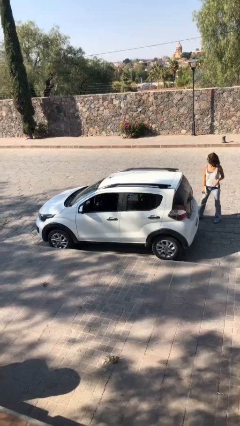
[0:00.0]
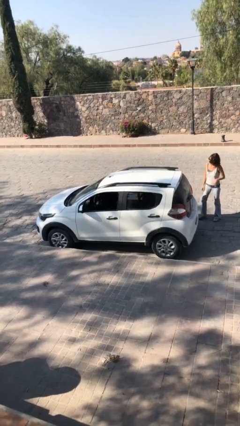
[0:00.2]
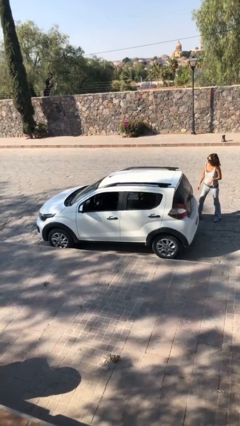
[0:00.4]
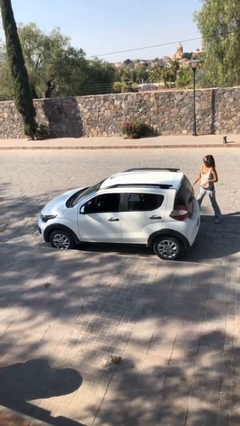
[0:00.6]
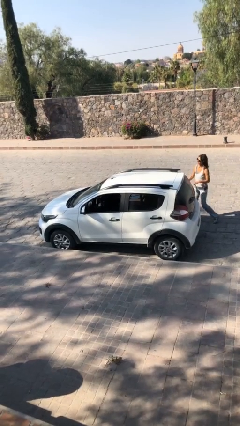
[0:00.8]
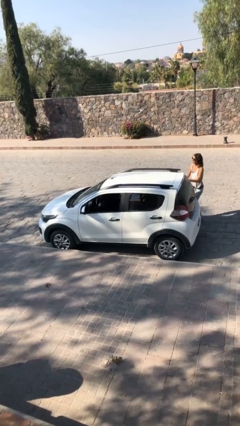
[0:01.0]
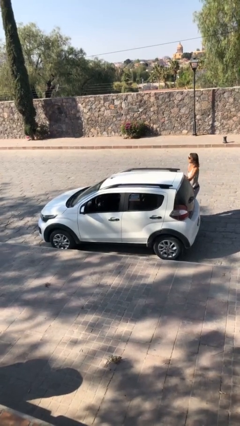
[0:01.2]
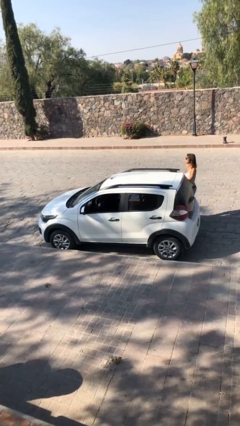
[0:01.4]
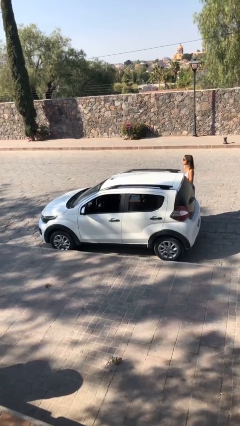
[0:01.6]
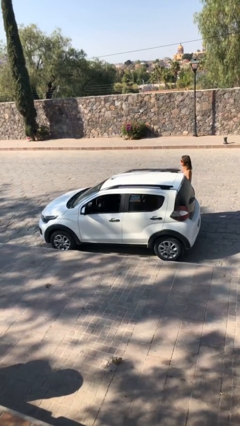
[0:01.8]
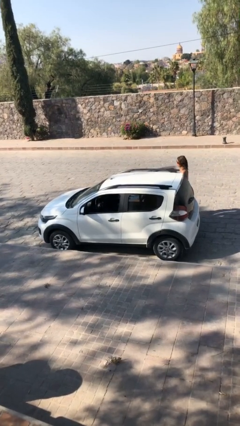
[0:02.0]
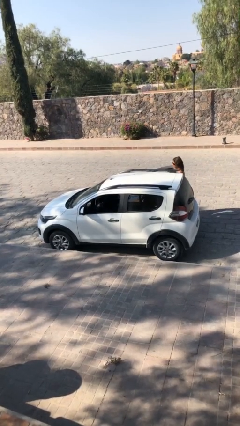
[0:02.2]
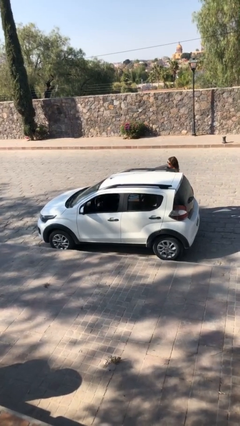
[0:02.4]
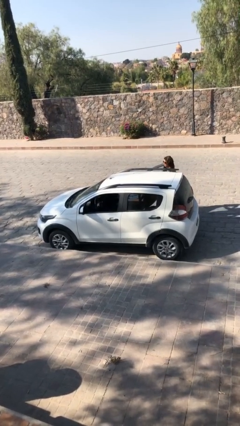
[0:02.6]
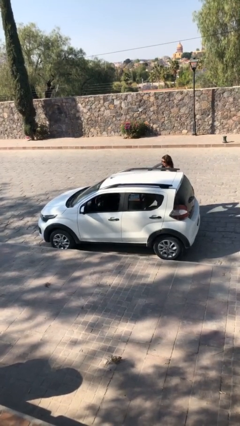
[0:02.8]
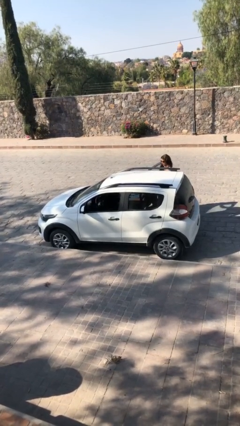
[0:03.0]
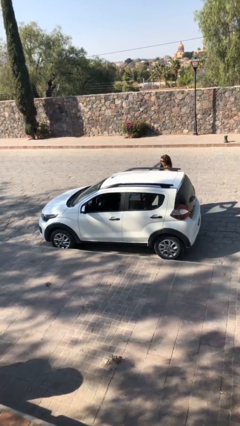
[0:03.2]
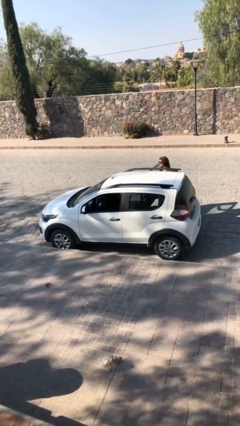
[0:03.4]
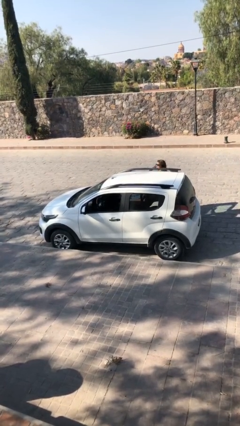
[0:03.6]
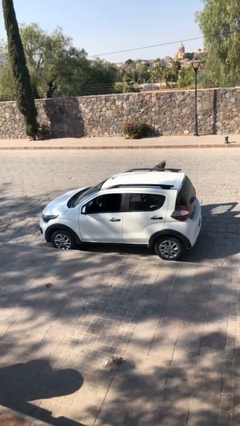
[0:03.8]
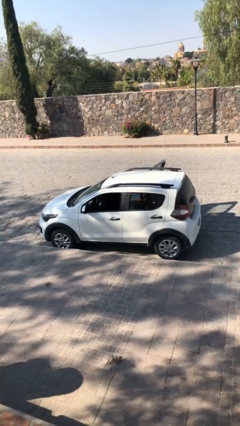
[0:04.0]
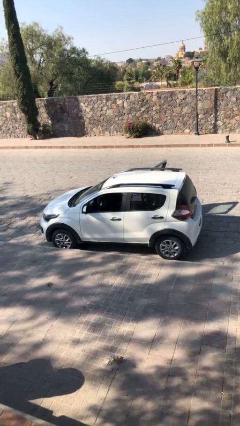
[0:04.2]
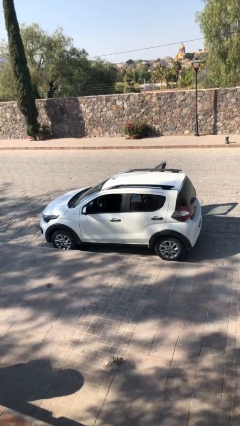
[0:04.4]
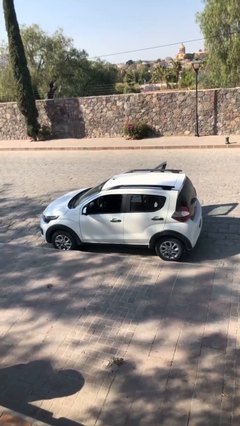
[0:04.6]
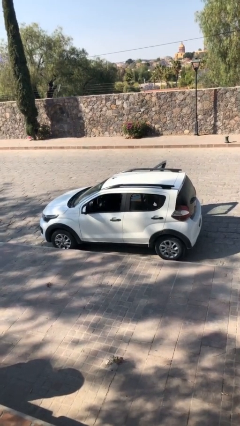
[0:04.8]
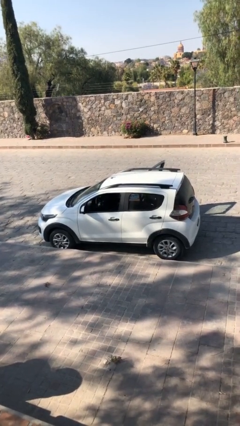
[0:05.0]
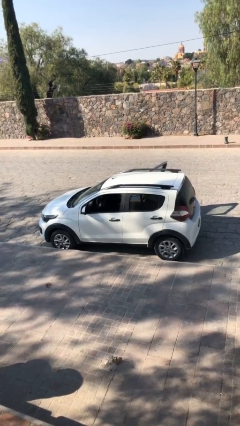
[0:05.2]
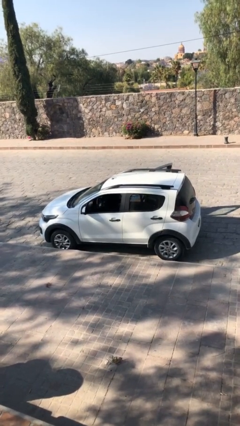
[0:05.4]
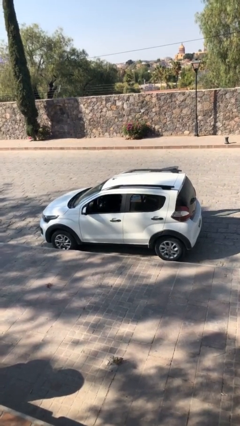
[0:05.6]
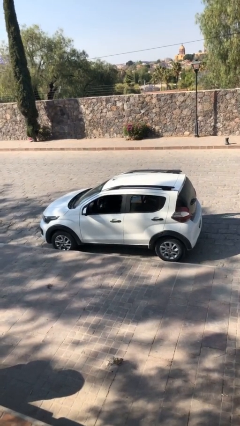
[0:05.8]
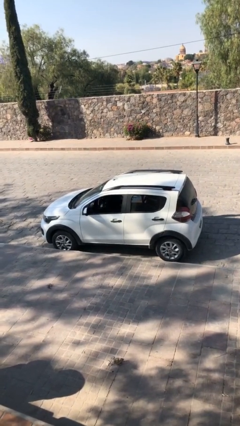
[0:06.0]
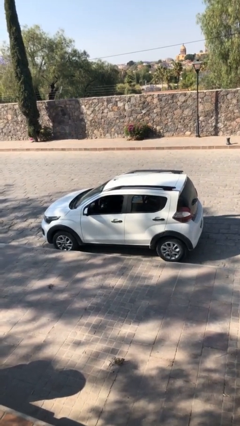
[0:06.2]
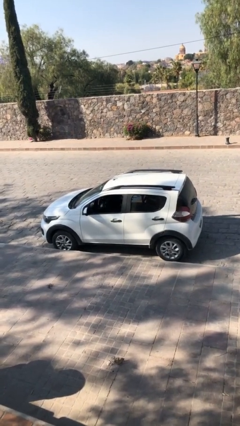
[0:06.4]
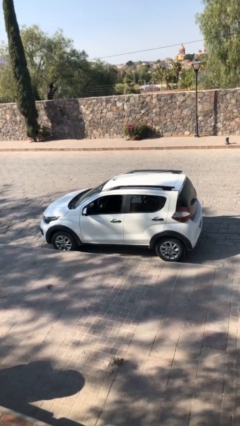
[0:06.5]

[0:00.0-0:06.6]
car picks up person

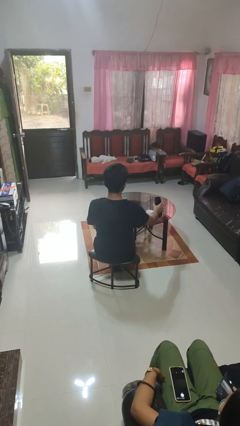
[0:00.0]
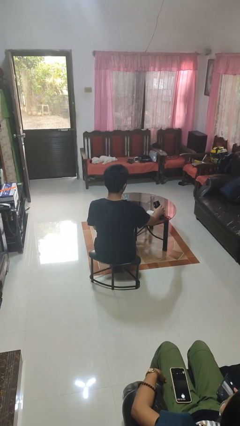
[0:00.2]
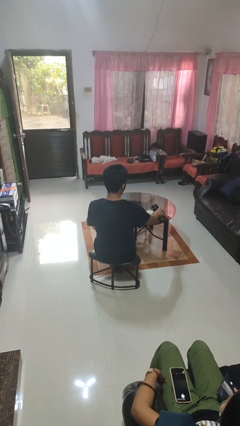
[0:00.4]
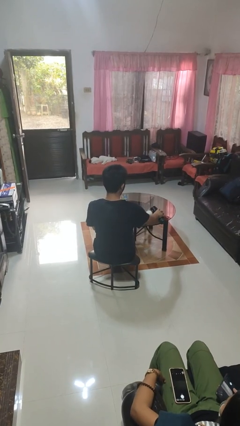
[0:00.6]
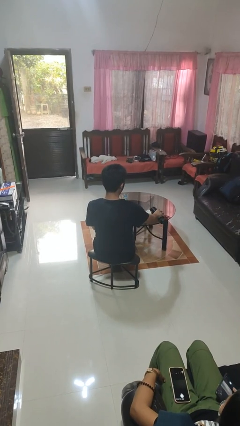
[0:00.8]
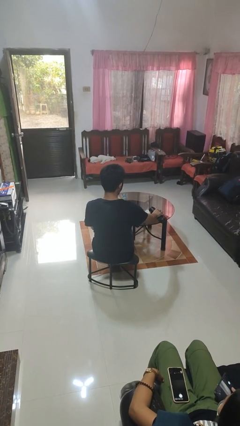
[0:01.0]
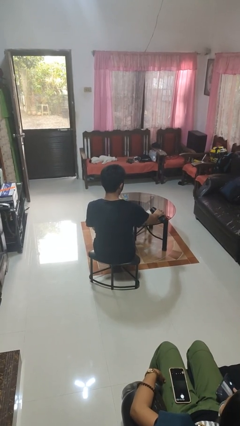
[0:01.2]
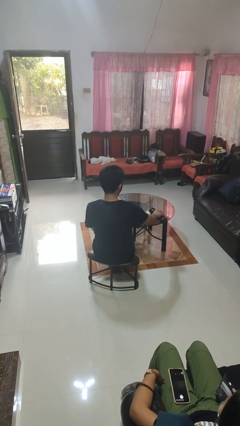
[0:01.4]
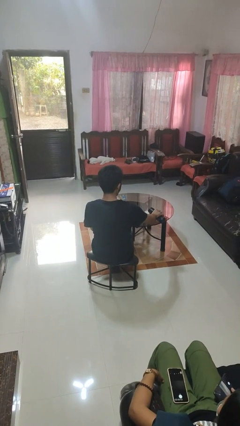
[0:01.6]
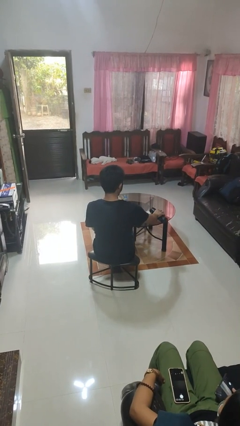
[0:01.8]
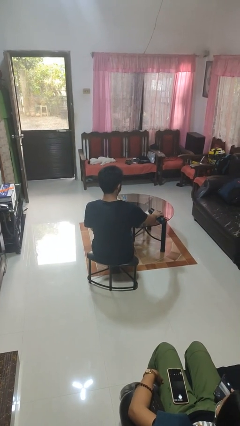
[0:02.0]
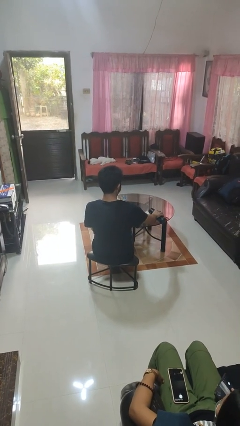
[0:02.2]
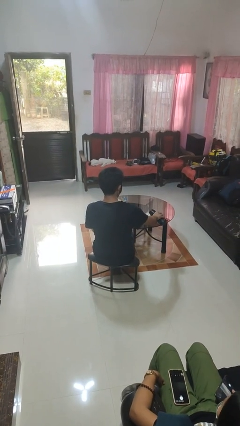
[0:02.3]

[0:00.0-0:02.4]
person pours liquid into cup

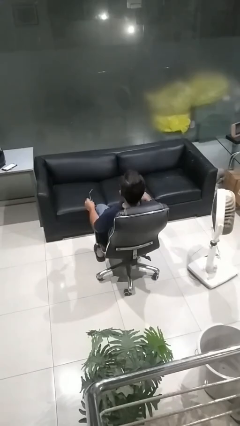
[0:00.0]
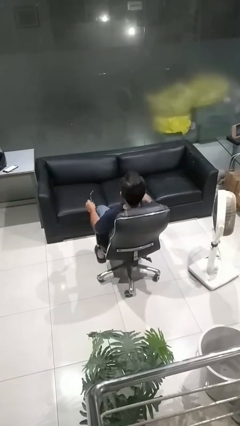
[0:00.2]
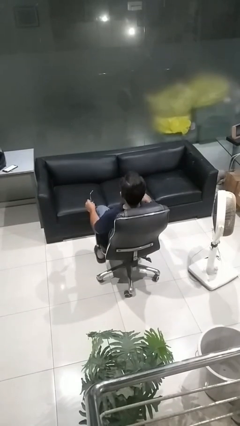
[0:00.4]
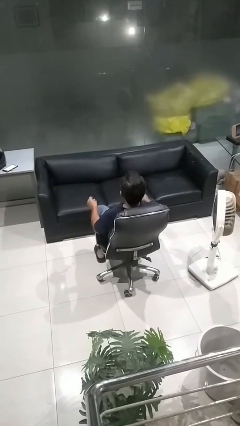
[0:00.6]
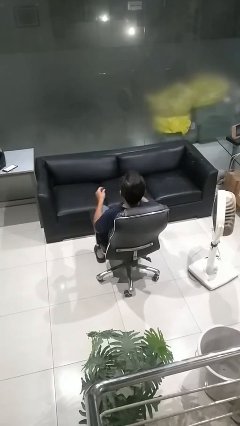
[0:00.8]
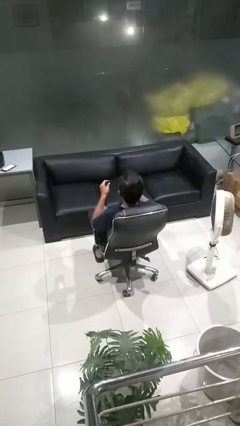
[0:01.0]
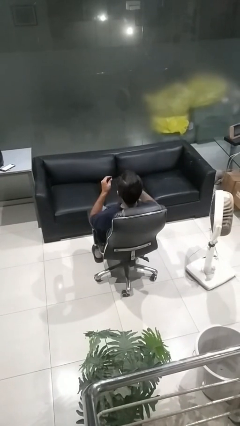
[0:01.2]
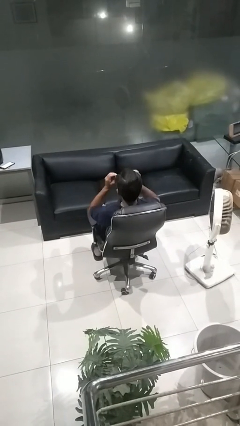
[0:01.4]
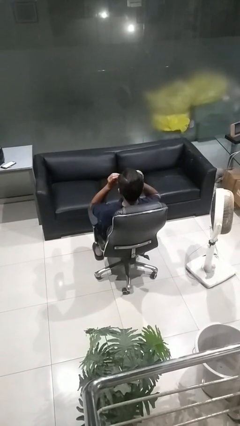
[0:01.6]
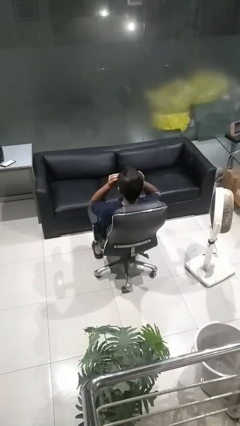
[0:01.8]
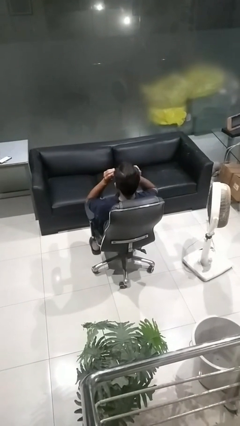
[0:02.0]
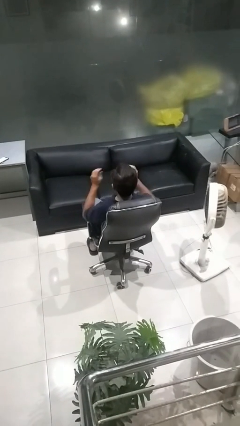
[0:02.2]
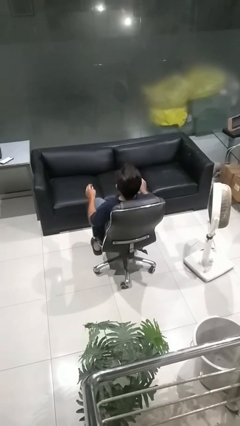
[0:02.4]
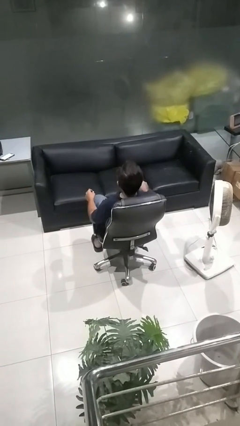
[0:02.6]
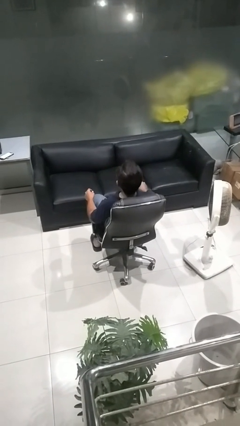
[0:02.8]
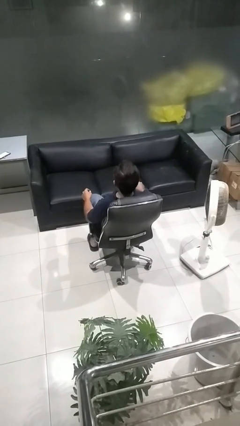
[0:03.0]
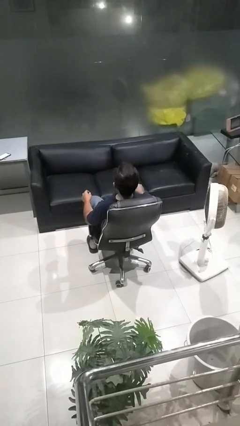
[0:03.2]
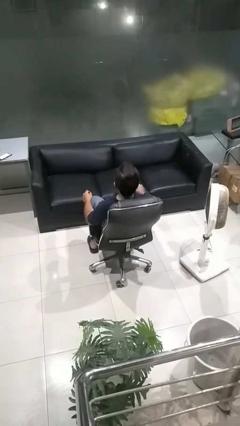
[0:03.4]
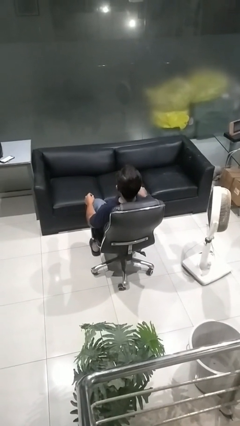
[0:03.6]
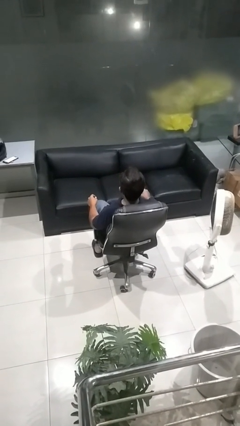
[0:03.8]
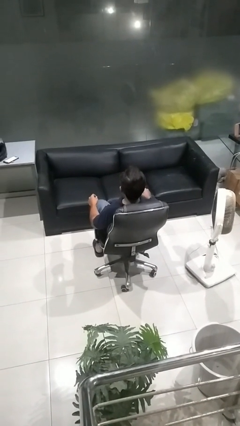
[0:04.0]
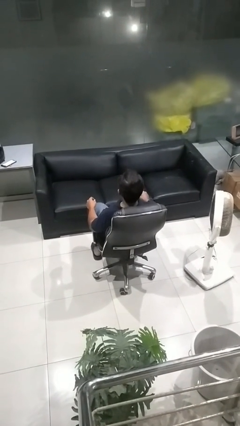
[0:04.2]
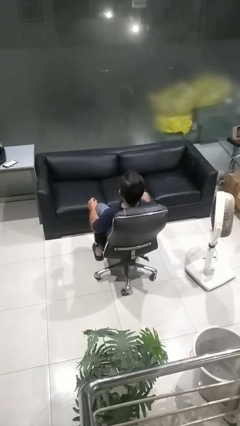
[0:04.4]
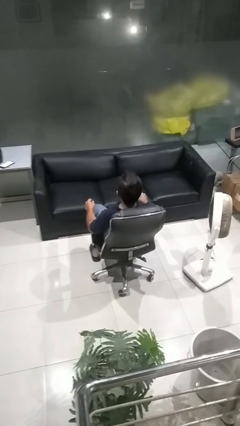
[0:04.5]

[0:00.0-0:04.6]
person puts on sunglasses

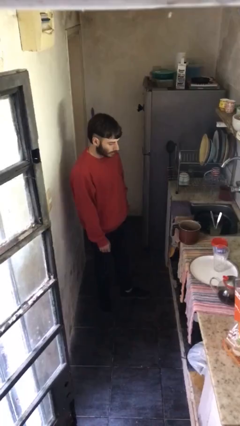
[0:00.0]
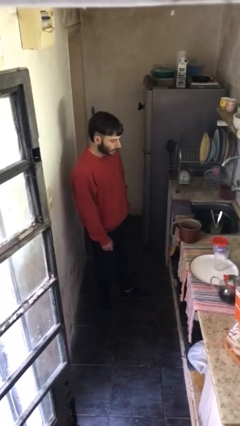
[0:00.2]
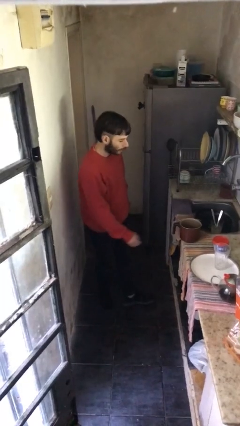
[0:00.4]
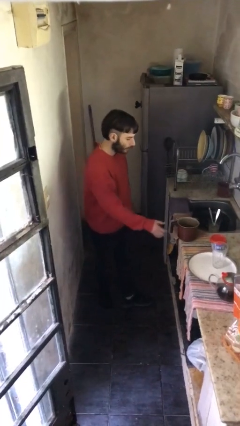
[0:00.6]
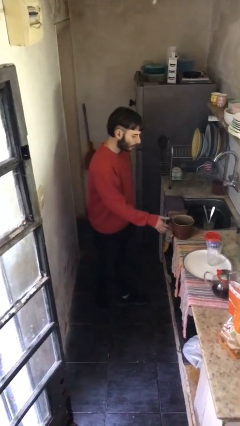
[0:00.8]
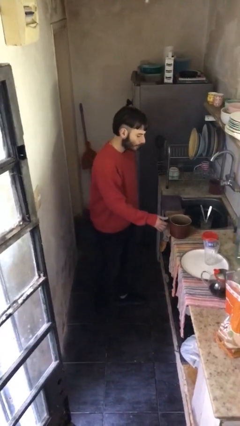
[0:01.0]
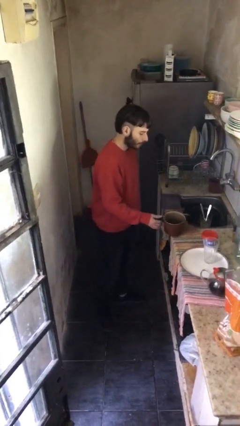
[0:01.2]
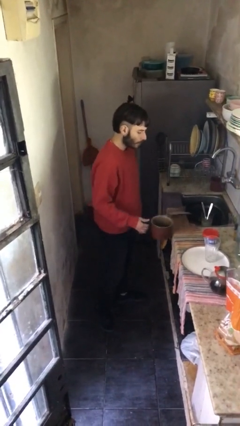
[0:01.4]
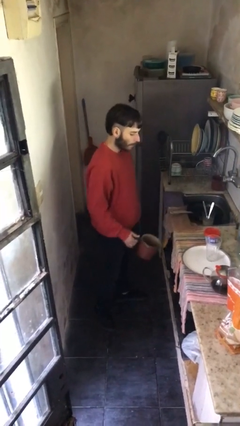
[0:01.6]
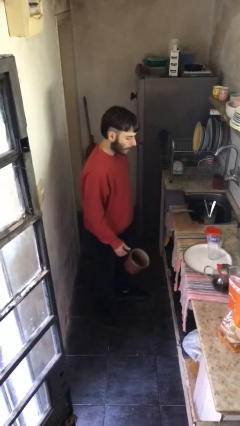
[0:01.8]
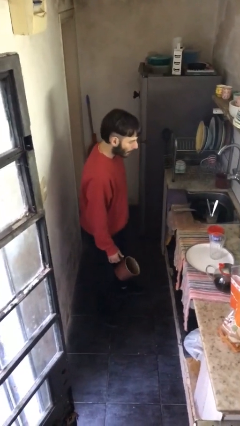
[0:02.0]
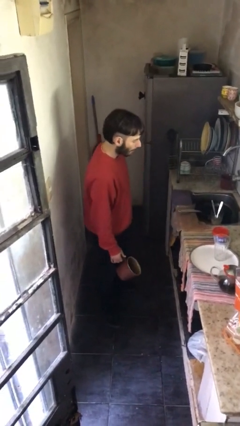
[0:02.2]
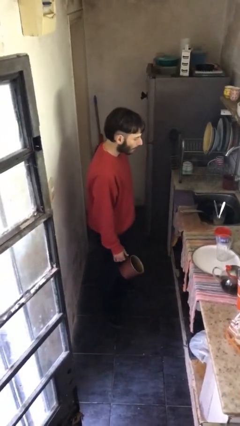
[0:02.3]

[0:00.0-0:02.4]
person picks up object from countertop

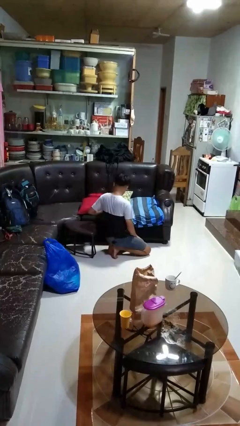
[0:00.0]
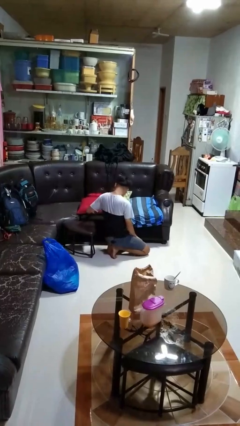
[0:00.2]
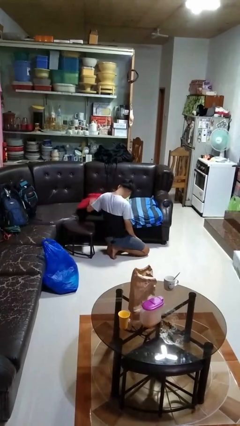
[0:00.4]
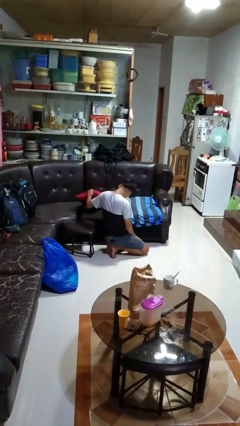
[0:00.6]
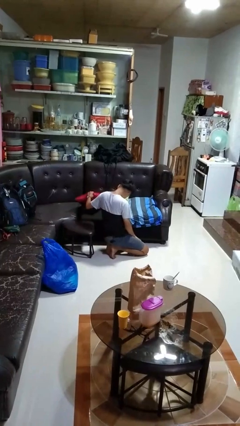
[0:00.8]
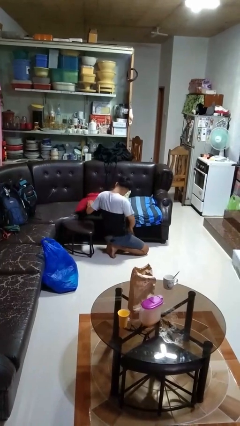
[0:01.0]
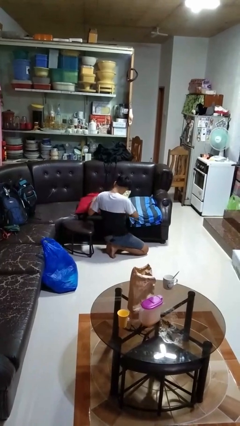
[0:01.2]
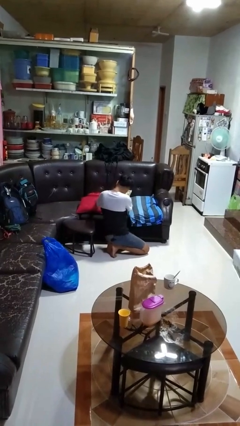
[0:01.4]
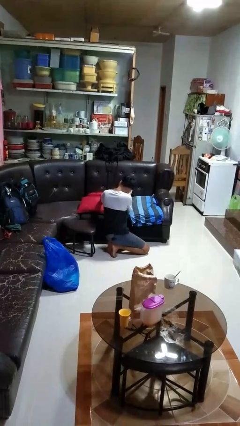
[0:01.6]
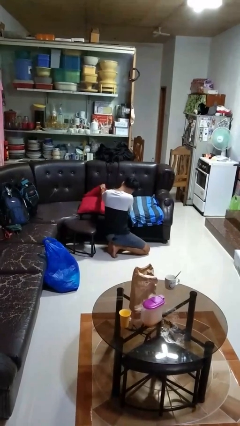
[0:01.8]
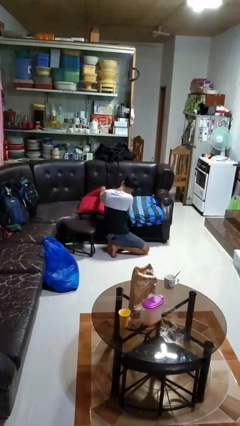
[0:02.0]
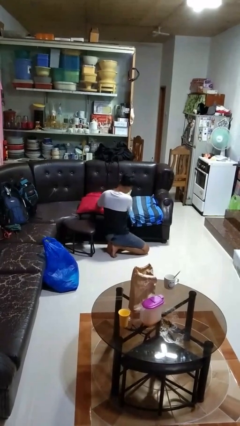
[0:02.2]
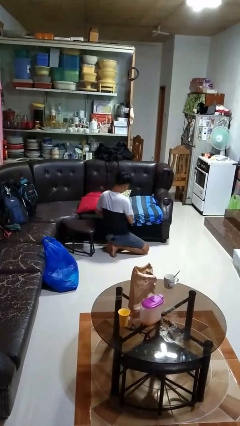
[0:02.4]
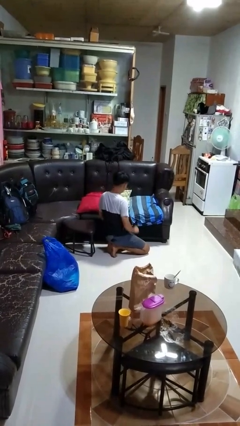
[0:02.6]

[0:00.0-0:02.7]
person searches in couch
